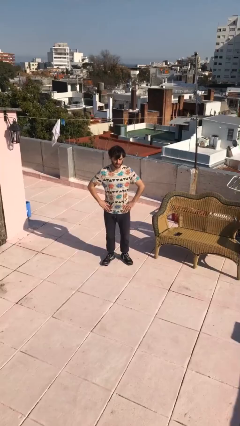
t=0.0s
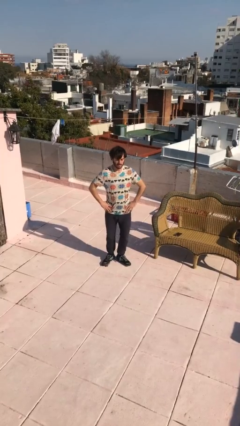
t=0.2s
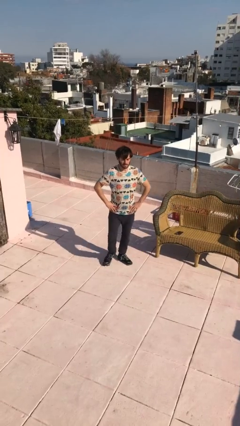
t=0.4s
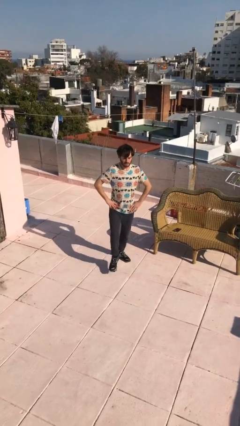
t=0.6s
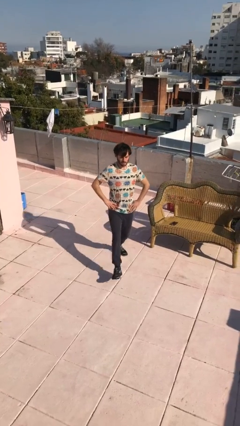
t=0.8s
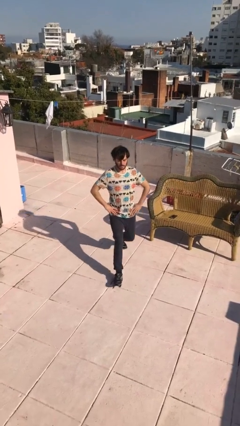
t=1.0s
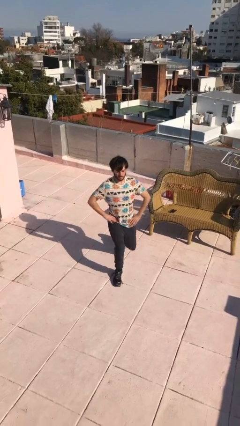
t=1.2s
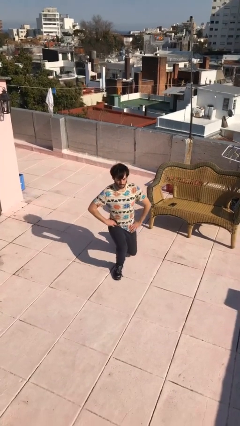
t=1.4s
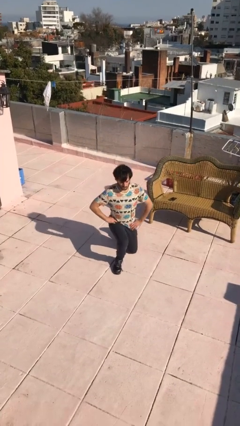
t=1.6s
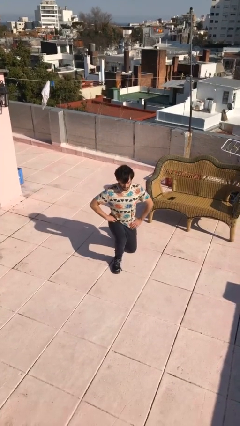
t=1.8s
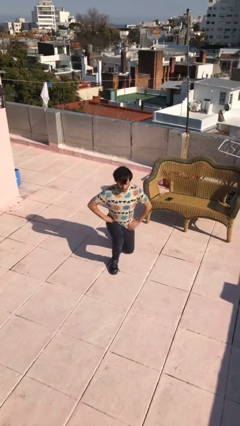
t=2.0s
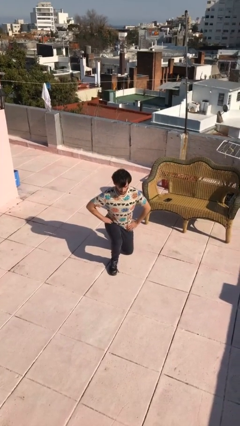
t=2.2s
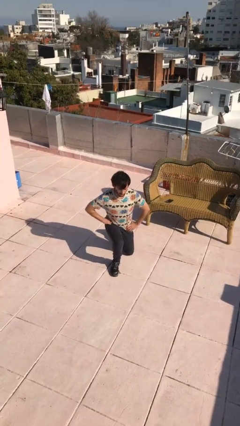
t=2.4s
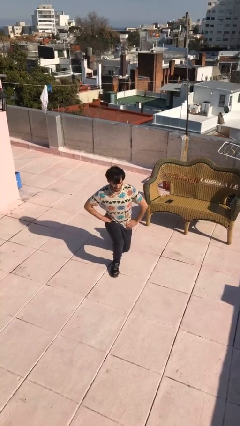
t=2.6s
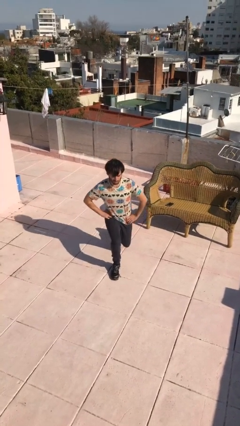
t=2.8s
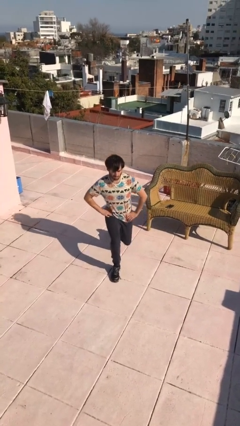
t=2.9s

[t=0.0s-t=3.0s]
person exercises with lunges

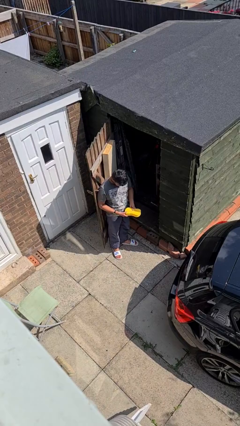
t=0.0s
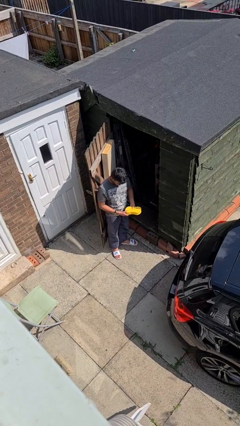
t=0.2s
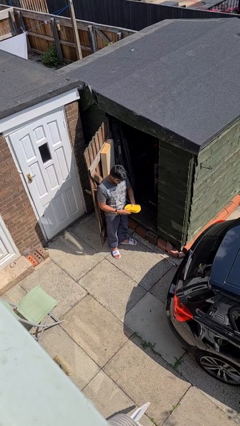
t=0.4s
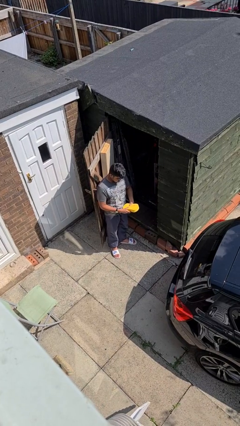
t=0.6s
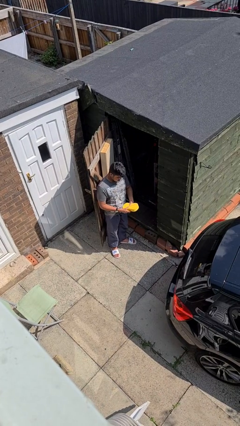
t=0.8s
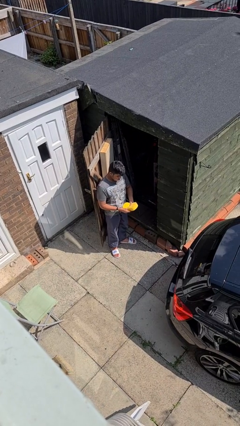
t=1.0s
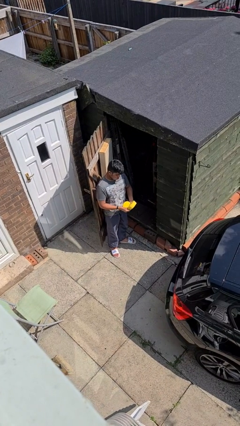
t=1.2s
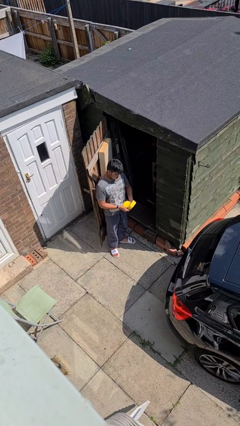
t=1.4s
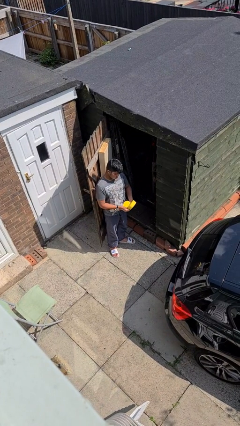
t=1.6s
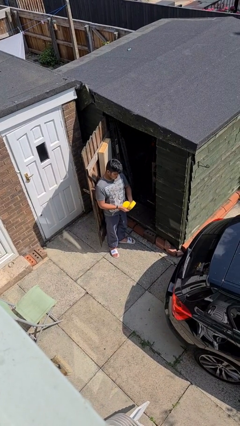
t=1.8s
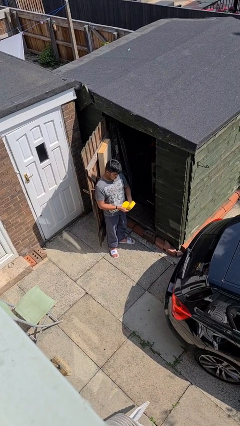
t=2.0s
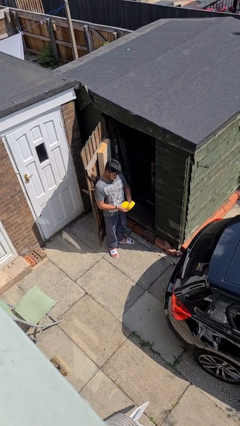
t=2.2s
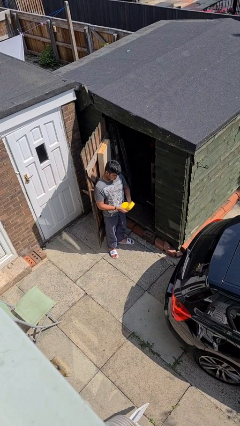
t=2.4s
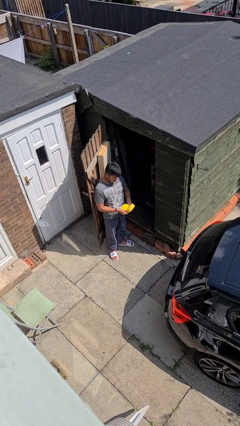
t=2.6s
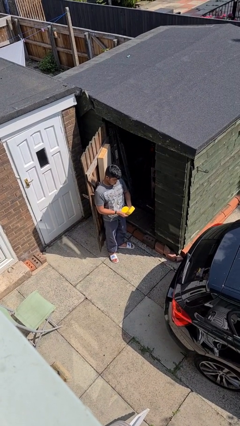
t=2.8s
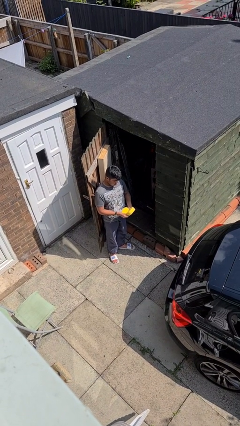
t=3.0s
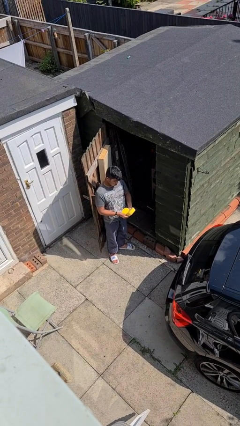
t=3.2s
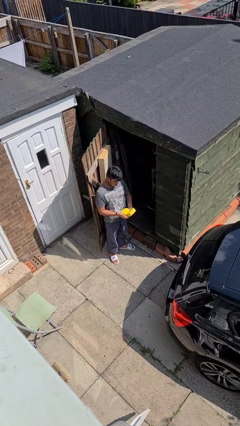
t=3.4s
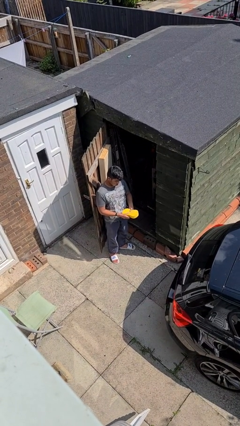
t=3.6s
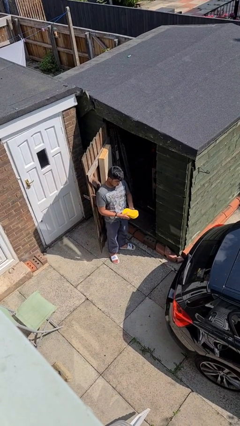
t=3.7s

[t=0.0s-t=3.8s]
person squeezes object

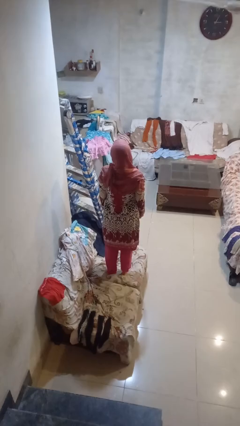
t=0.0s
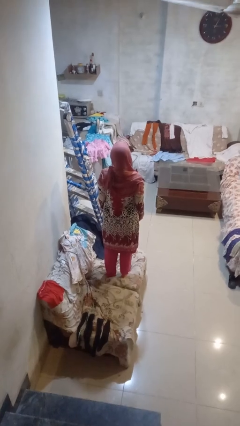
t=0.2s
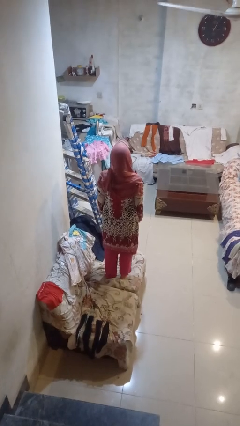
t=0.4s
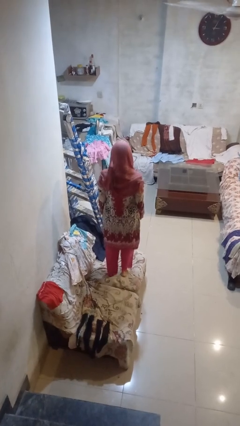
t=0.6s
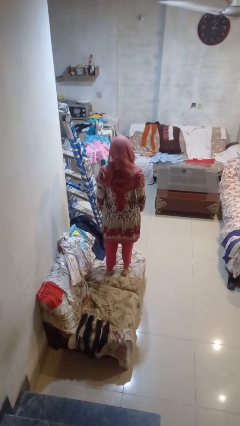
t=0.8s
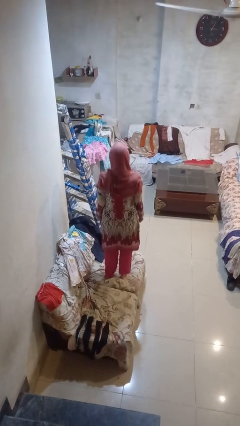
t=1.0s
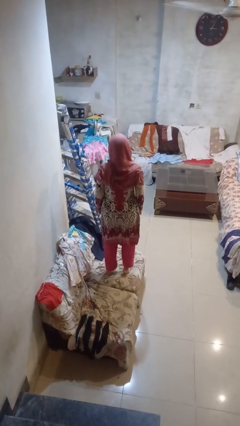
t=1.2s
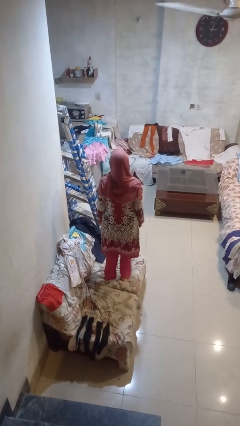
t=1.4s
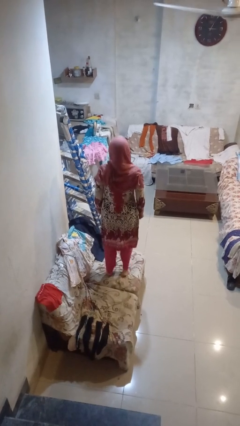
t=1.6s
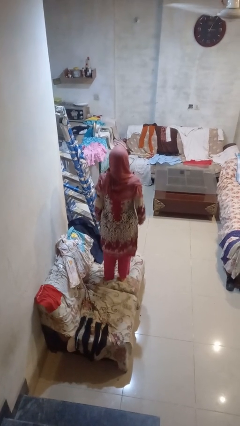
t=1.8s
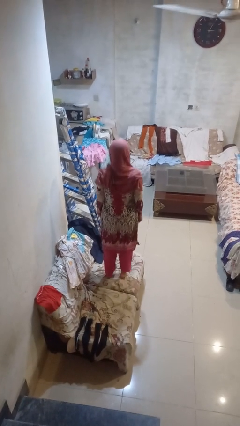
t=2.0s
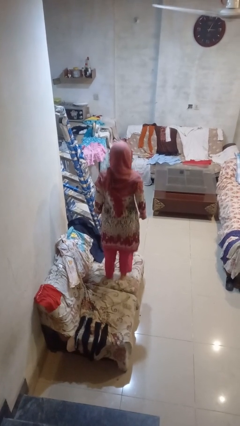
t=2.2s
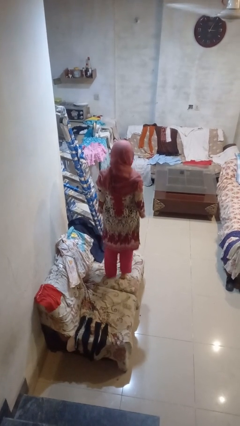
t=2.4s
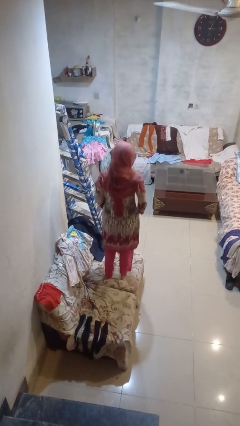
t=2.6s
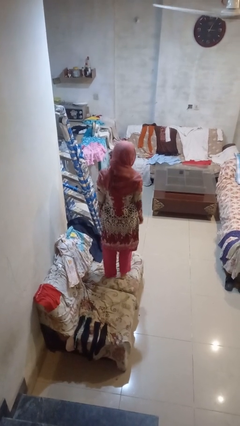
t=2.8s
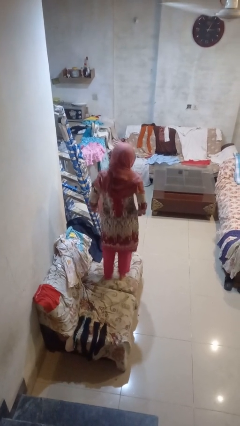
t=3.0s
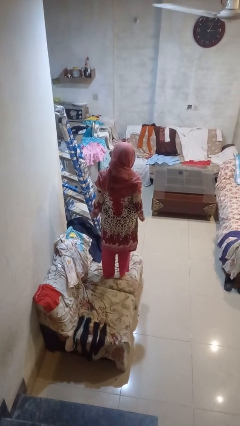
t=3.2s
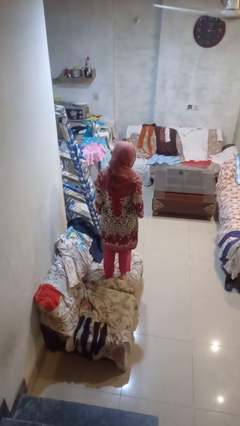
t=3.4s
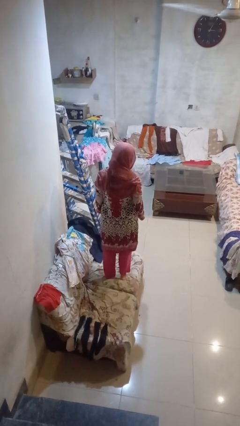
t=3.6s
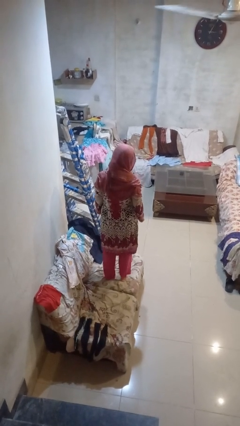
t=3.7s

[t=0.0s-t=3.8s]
person jumps on couch

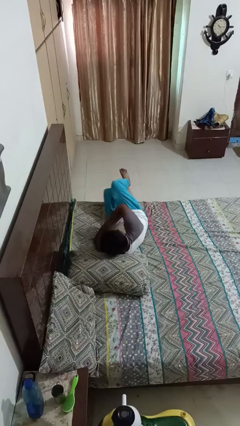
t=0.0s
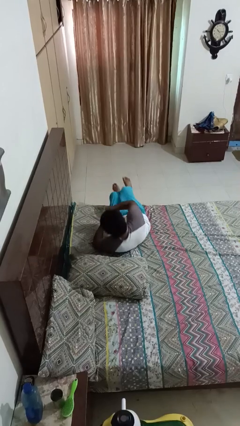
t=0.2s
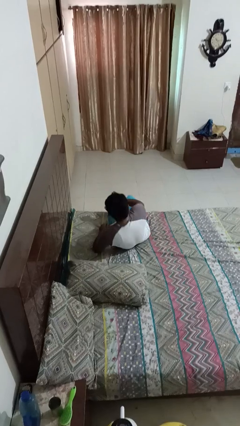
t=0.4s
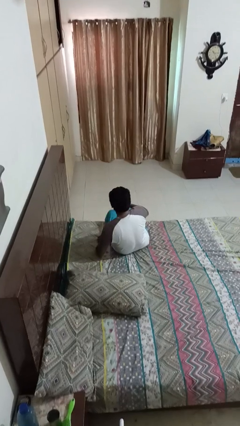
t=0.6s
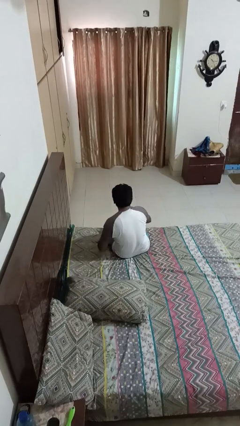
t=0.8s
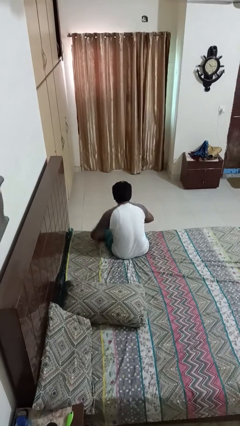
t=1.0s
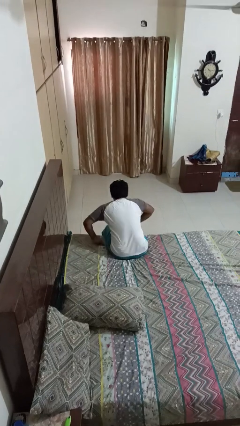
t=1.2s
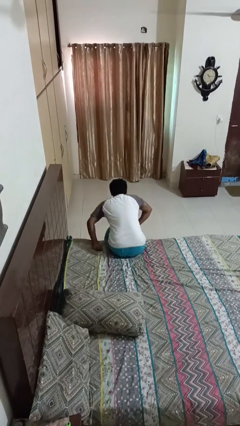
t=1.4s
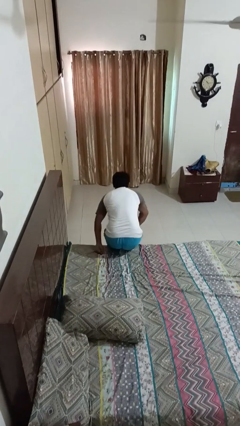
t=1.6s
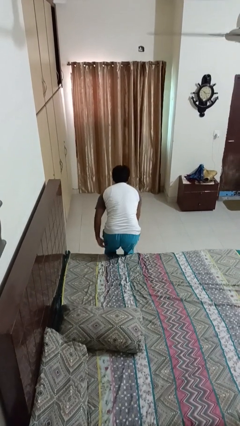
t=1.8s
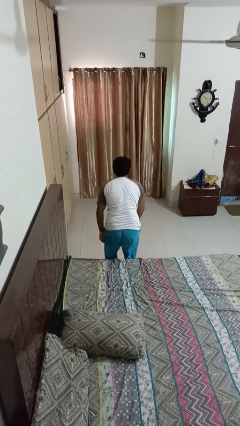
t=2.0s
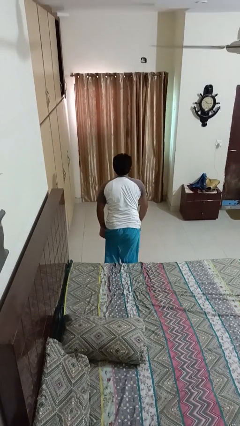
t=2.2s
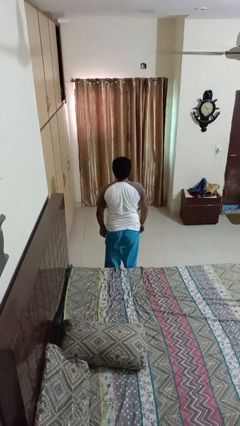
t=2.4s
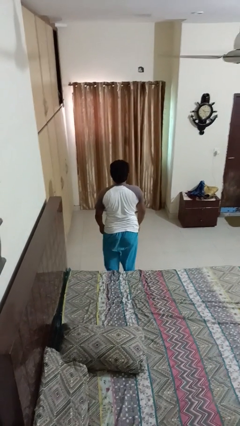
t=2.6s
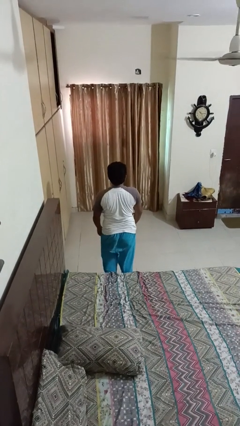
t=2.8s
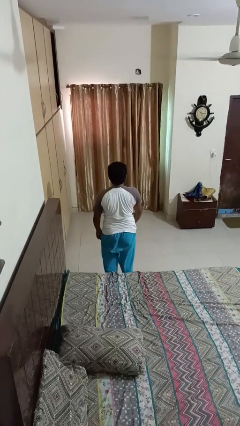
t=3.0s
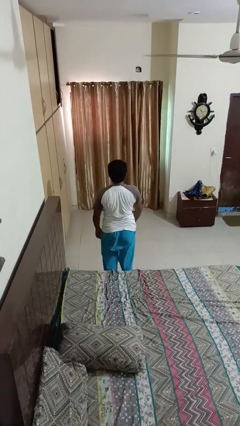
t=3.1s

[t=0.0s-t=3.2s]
person stands up

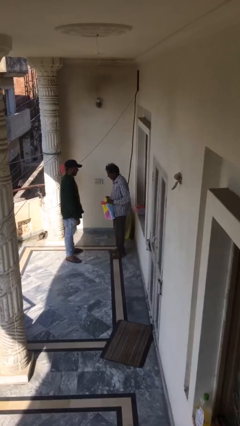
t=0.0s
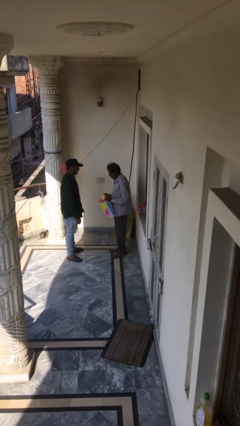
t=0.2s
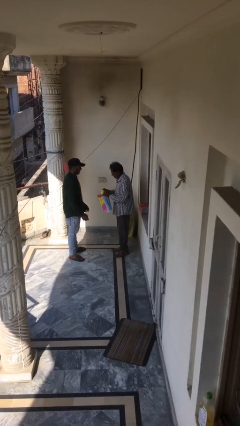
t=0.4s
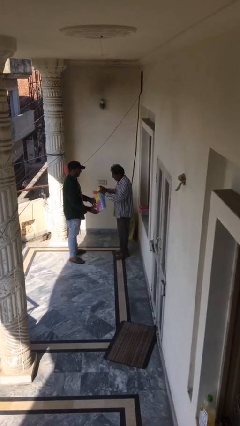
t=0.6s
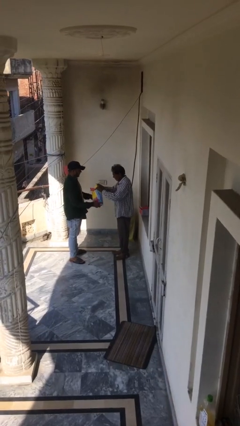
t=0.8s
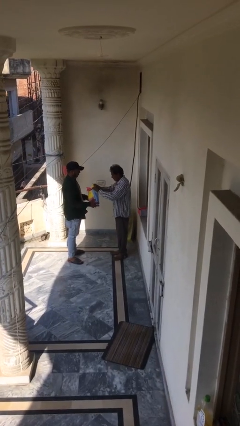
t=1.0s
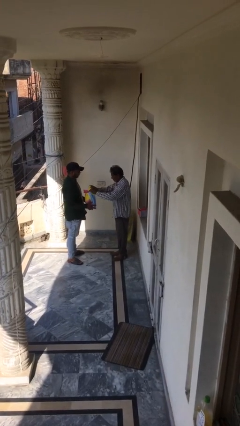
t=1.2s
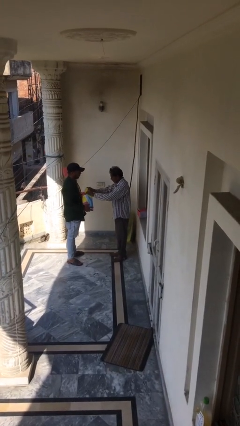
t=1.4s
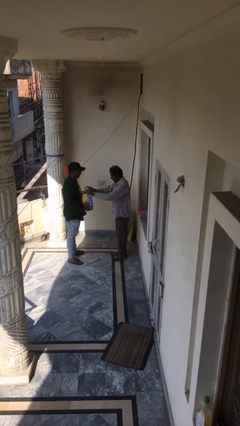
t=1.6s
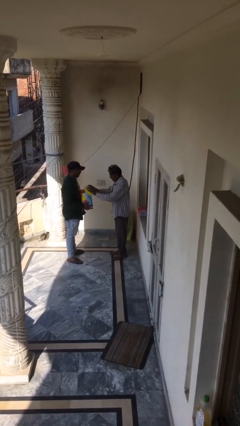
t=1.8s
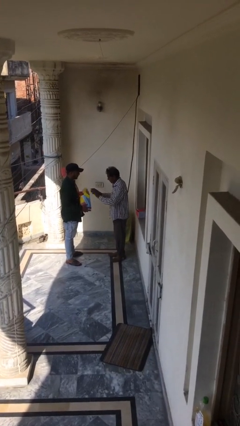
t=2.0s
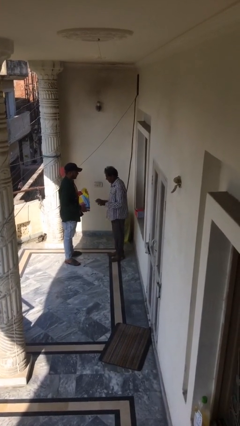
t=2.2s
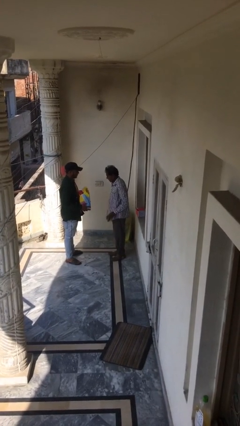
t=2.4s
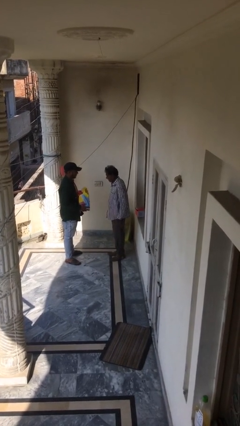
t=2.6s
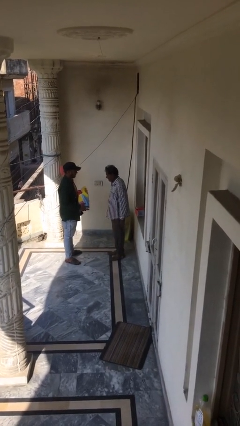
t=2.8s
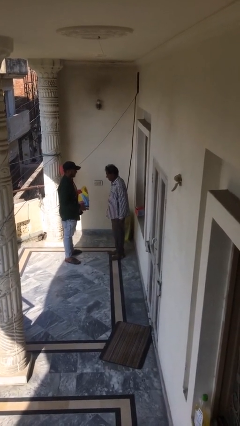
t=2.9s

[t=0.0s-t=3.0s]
person transfers object to person

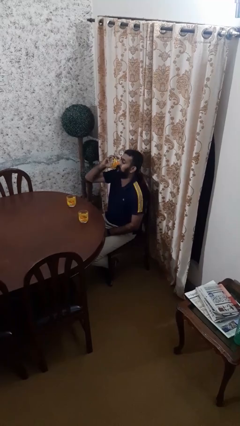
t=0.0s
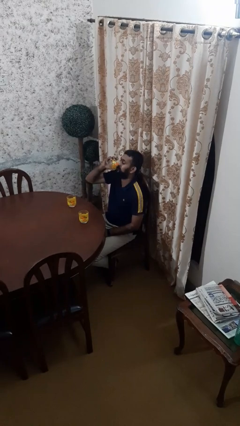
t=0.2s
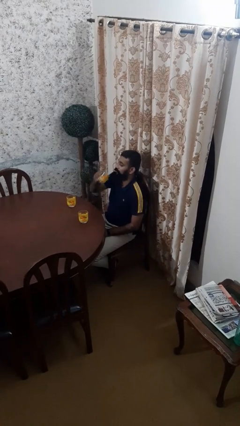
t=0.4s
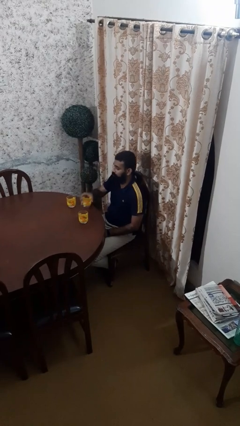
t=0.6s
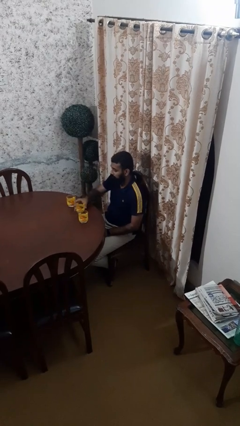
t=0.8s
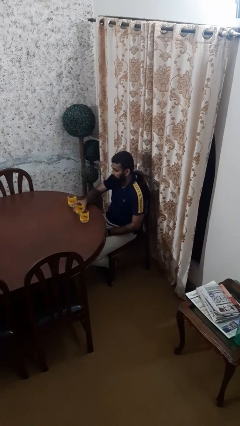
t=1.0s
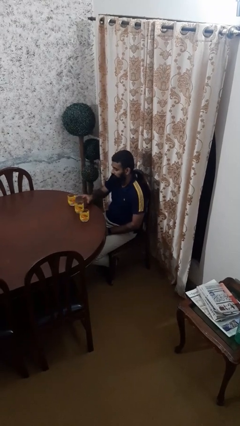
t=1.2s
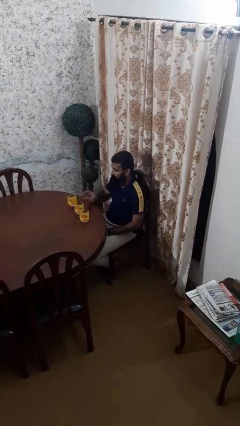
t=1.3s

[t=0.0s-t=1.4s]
person puts down object on table
